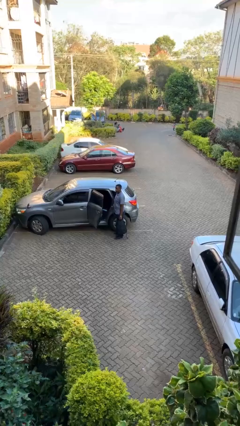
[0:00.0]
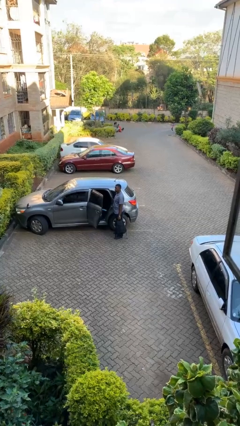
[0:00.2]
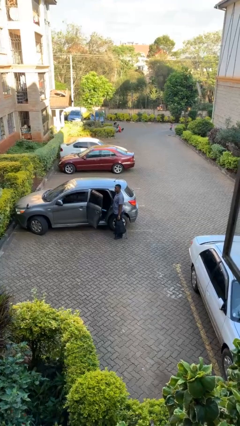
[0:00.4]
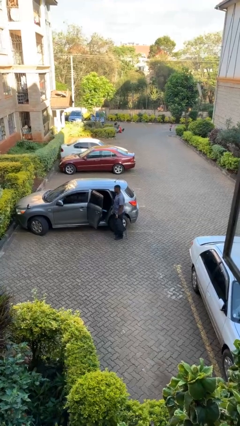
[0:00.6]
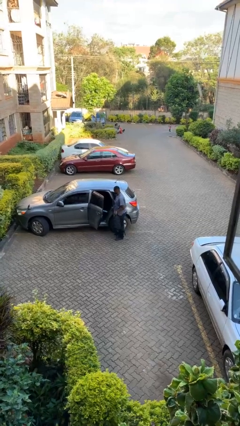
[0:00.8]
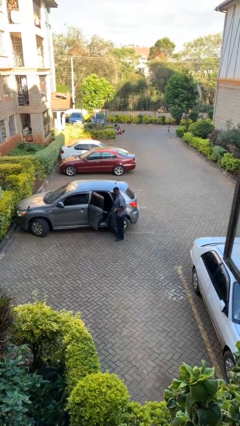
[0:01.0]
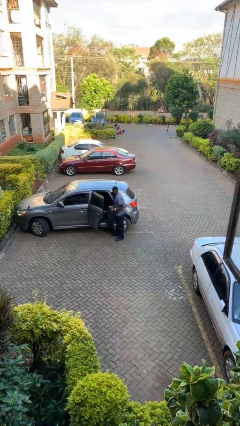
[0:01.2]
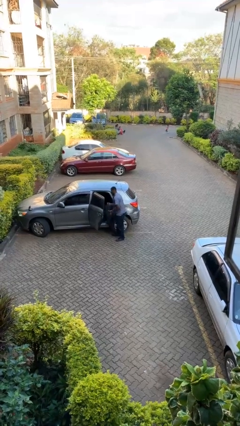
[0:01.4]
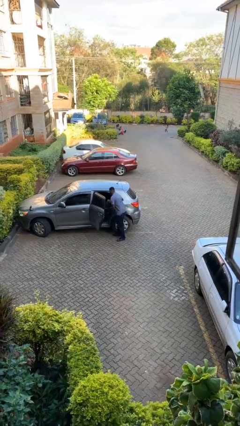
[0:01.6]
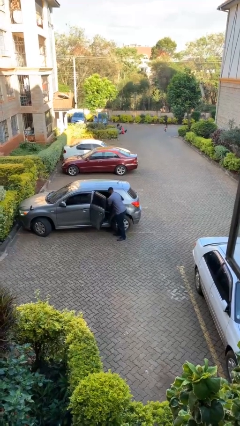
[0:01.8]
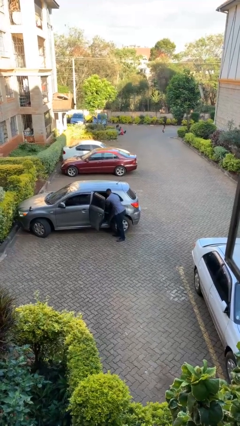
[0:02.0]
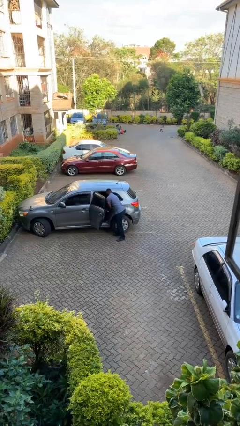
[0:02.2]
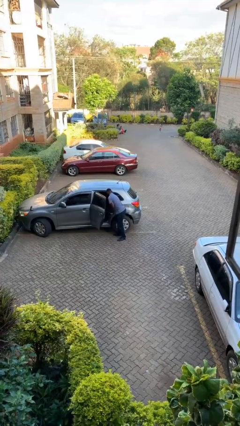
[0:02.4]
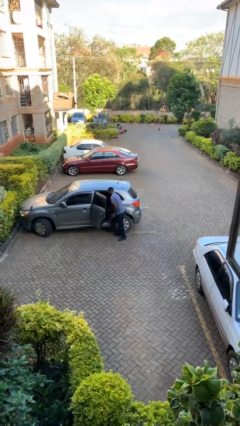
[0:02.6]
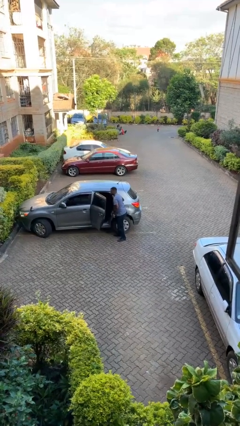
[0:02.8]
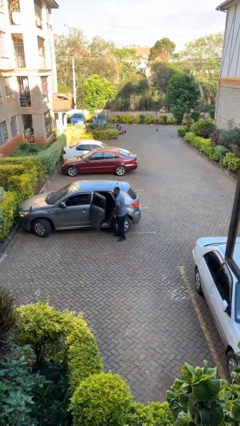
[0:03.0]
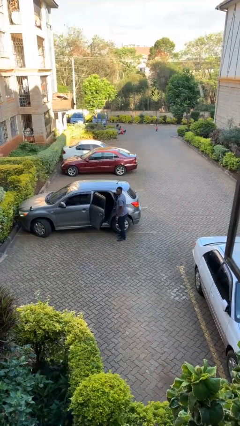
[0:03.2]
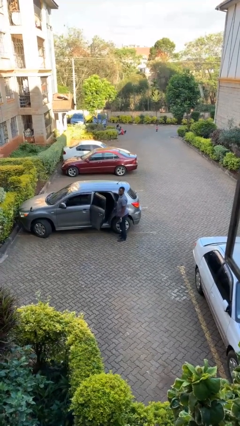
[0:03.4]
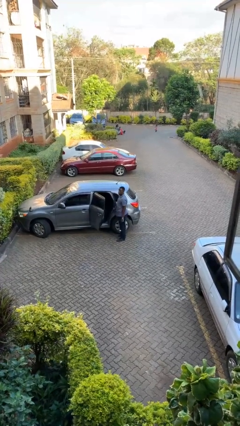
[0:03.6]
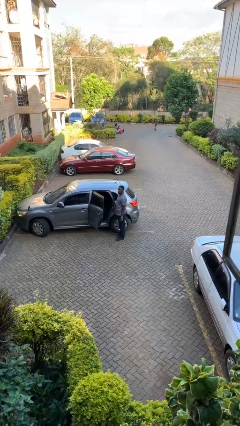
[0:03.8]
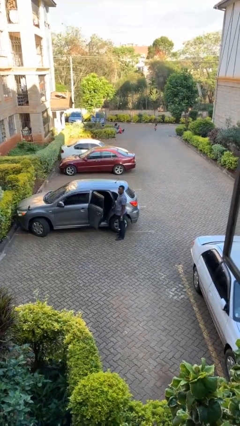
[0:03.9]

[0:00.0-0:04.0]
person loads car

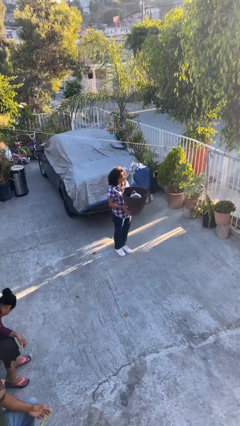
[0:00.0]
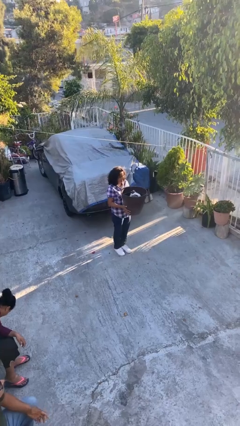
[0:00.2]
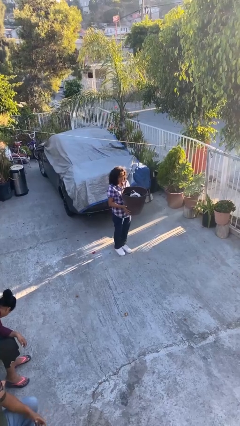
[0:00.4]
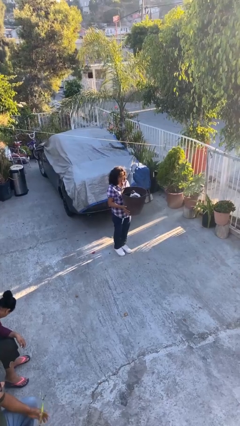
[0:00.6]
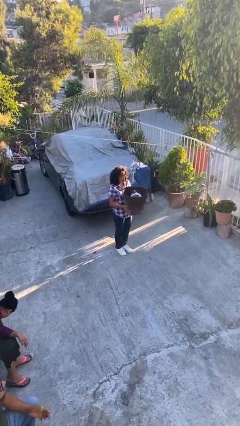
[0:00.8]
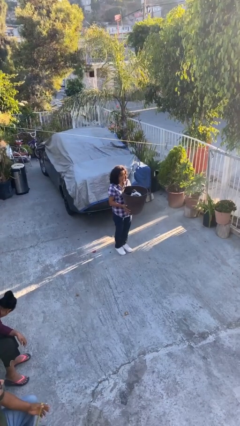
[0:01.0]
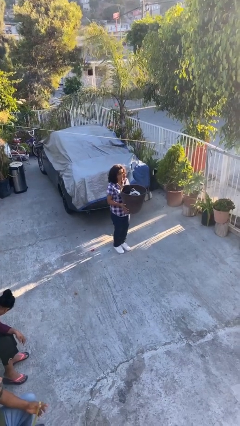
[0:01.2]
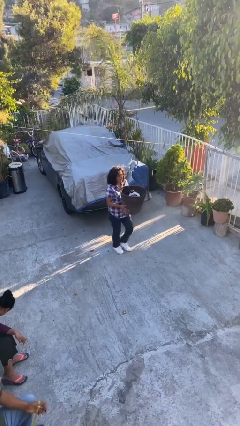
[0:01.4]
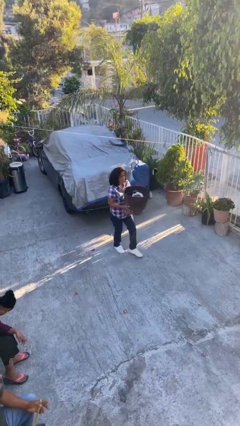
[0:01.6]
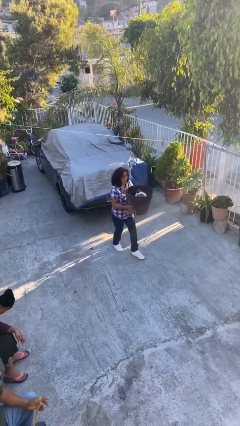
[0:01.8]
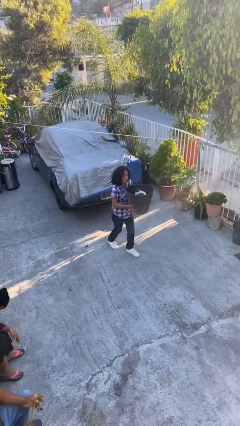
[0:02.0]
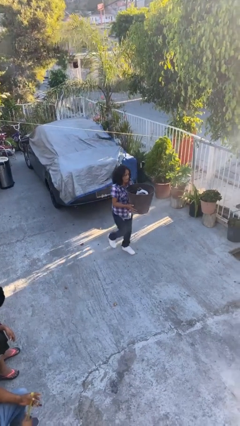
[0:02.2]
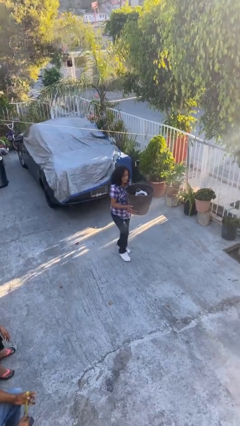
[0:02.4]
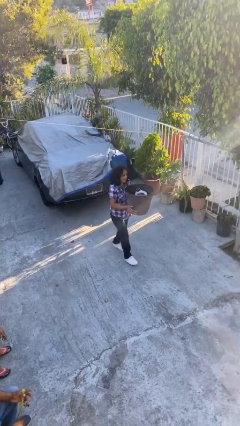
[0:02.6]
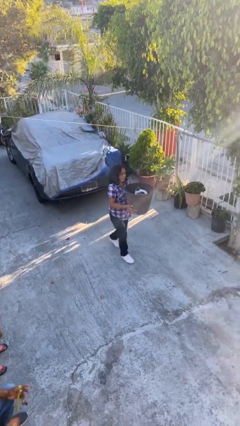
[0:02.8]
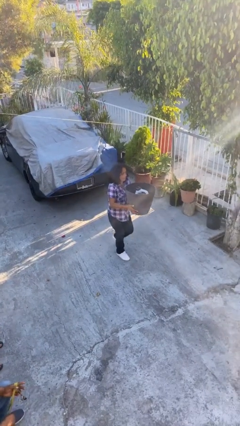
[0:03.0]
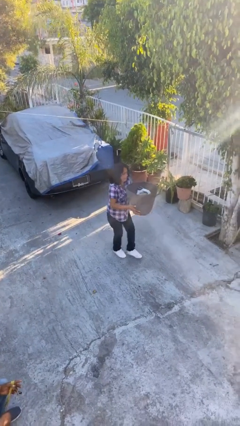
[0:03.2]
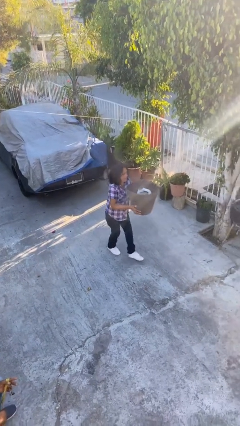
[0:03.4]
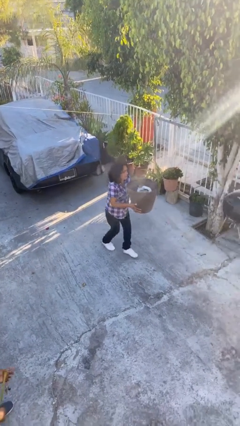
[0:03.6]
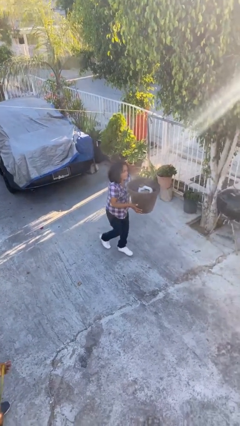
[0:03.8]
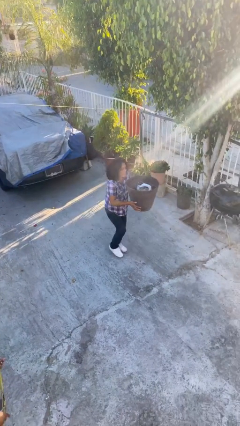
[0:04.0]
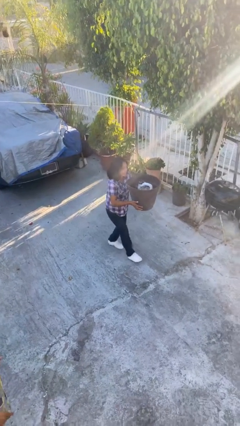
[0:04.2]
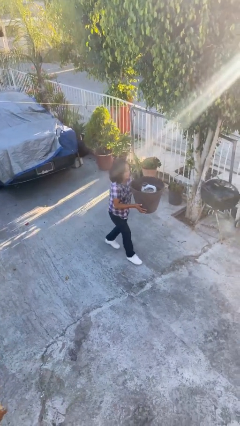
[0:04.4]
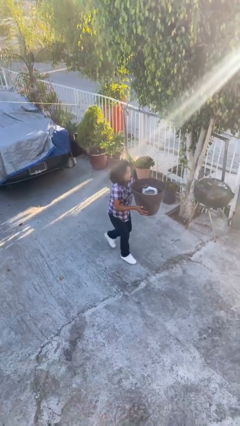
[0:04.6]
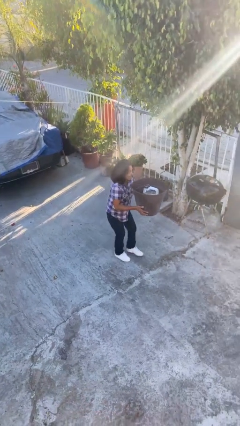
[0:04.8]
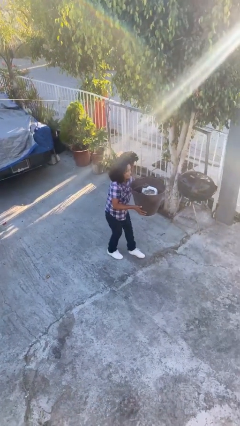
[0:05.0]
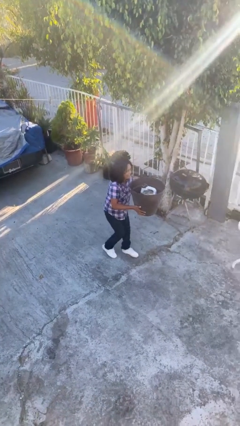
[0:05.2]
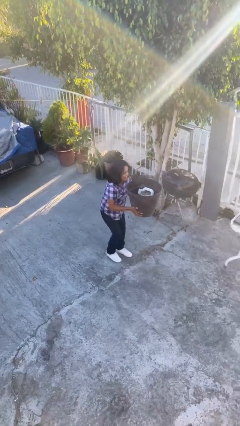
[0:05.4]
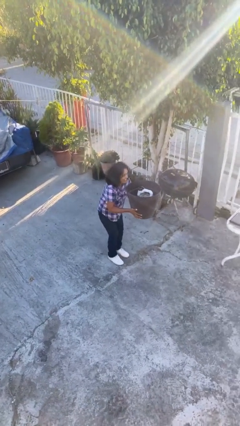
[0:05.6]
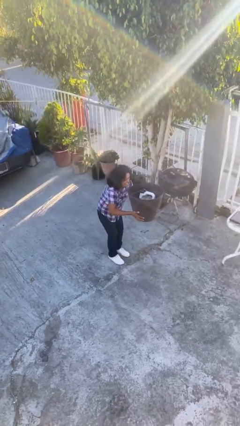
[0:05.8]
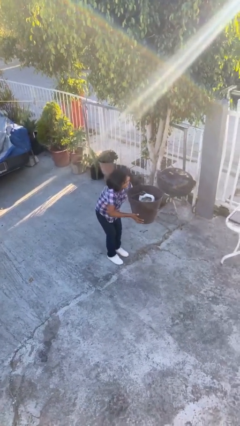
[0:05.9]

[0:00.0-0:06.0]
person carries heavy object

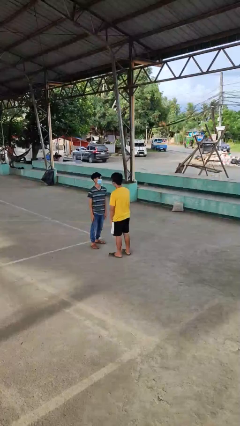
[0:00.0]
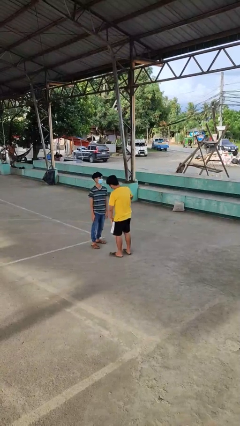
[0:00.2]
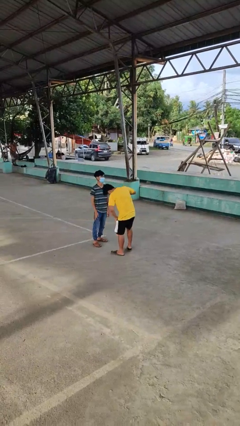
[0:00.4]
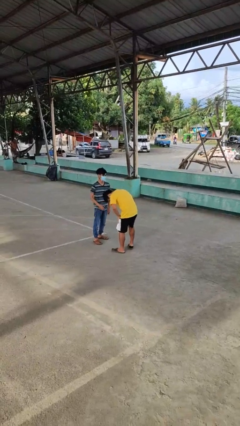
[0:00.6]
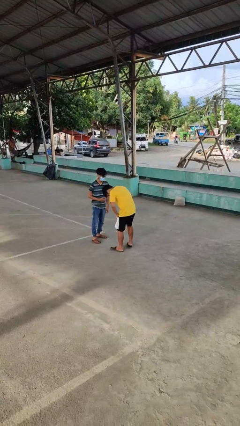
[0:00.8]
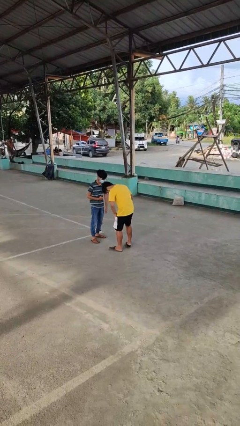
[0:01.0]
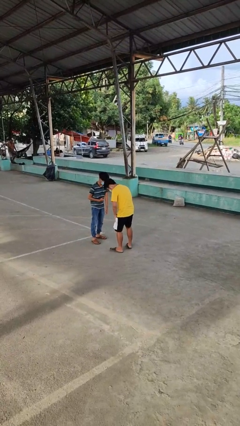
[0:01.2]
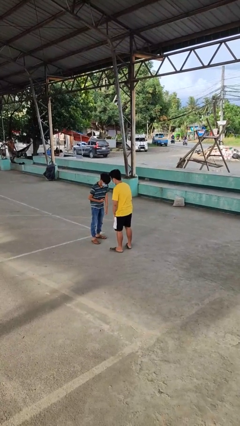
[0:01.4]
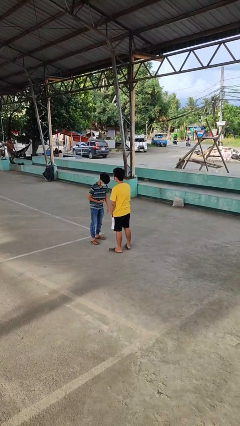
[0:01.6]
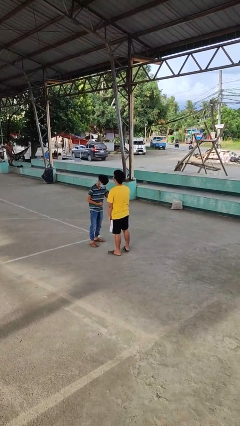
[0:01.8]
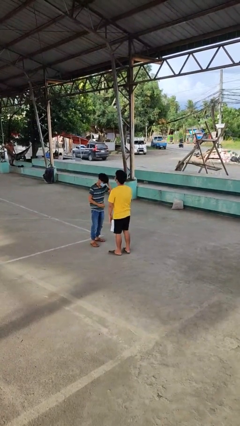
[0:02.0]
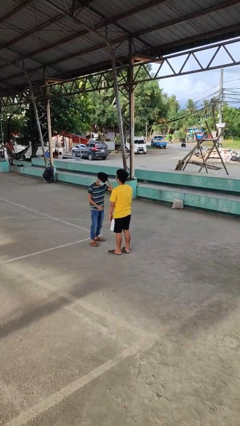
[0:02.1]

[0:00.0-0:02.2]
person laughs with person

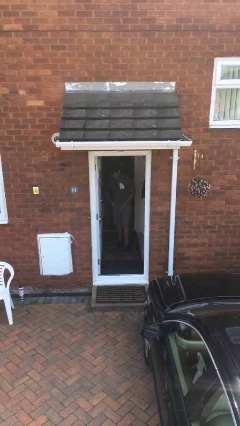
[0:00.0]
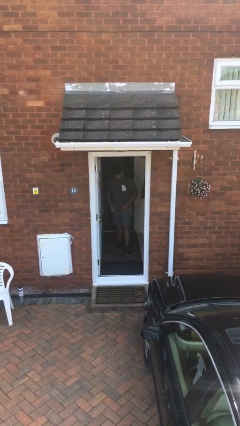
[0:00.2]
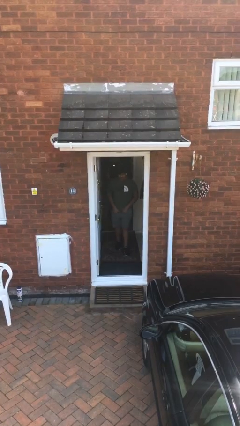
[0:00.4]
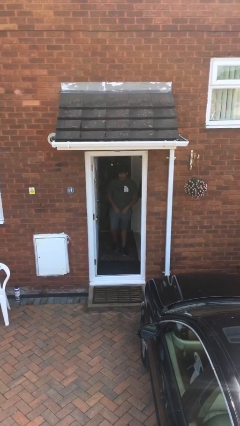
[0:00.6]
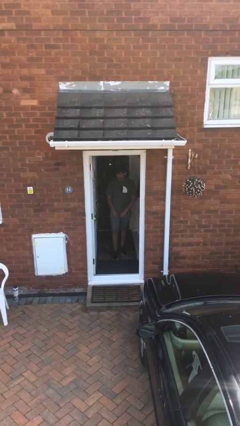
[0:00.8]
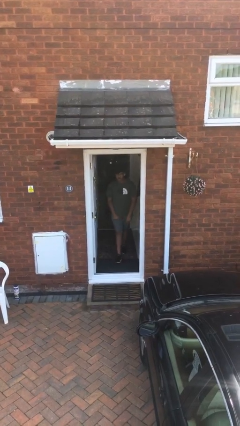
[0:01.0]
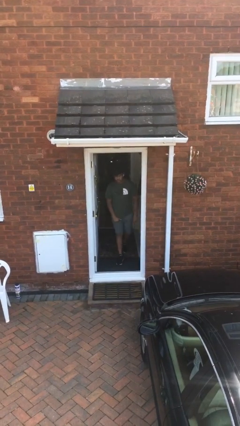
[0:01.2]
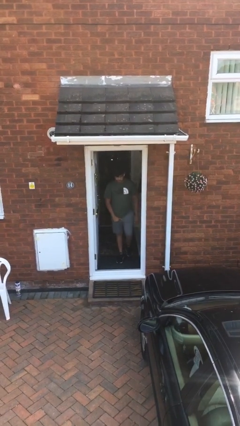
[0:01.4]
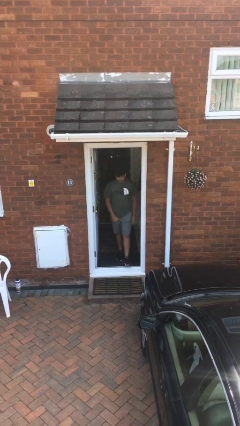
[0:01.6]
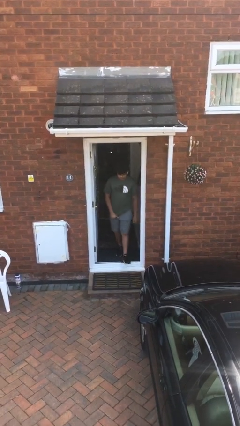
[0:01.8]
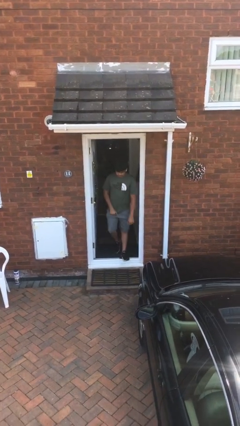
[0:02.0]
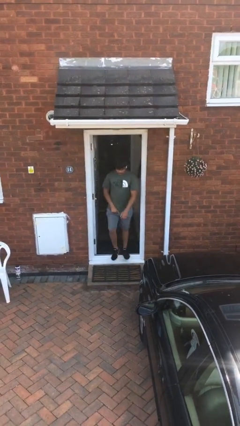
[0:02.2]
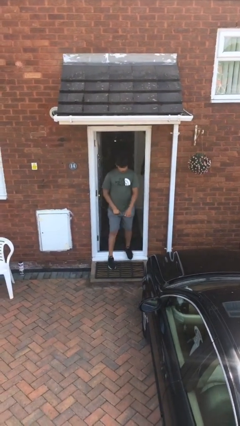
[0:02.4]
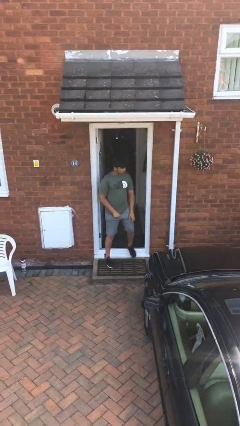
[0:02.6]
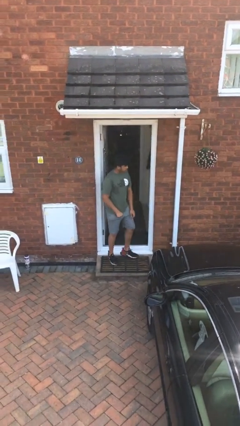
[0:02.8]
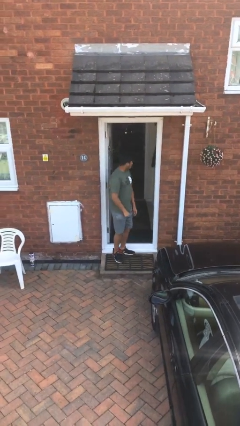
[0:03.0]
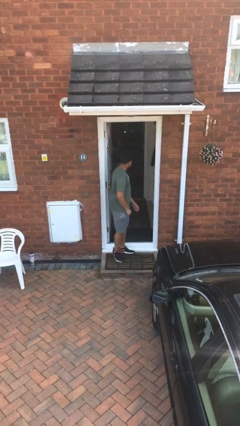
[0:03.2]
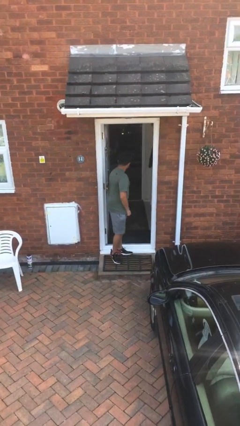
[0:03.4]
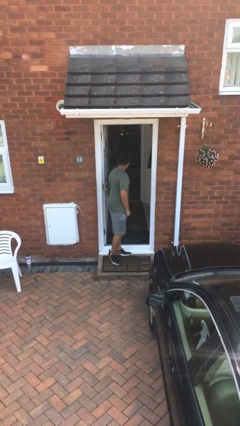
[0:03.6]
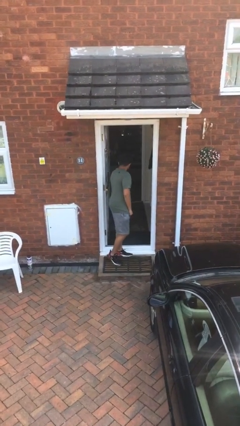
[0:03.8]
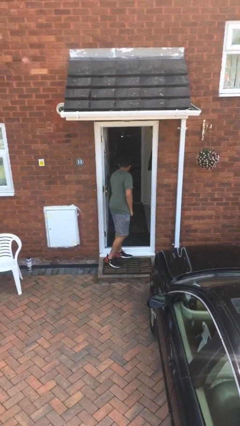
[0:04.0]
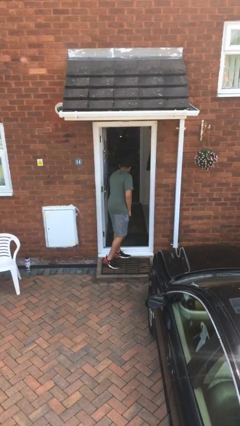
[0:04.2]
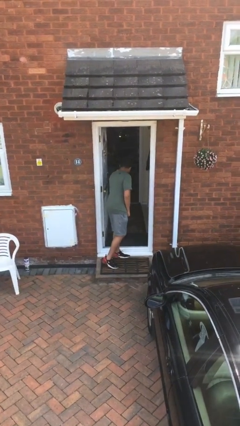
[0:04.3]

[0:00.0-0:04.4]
person enters scene through structure

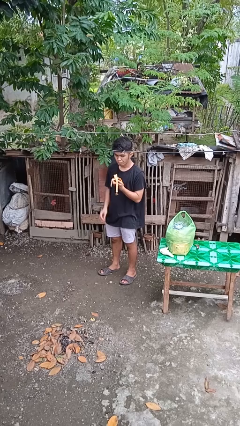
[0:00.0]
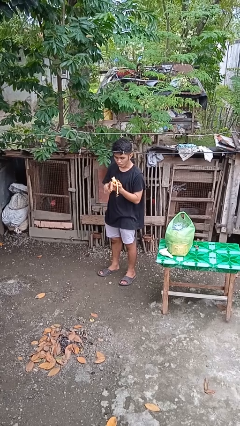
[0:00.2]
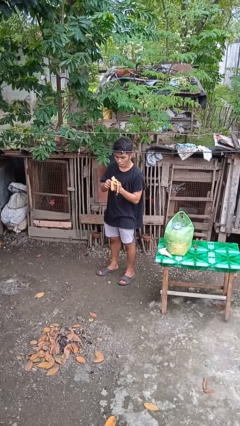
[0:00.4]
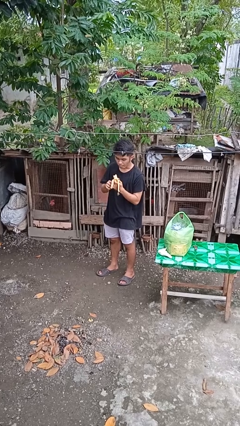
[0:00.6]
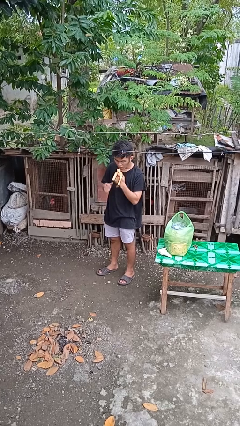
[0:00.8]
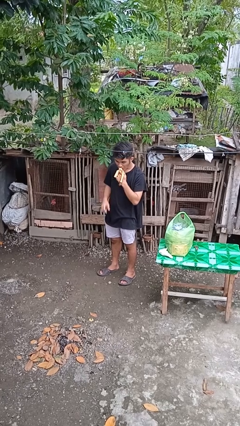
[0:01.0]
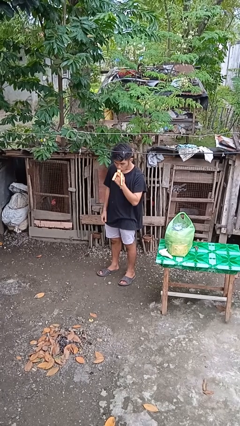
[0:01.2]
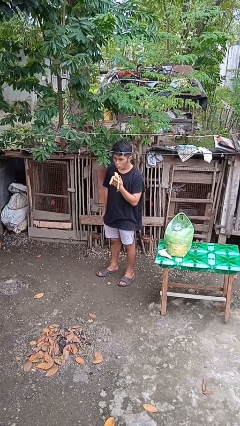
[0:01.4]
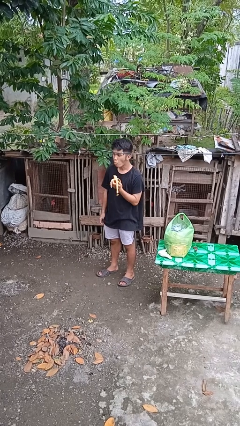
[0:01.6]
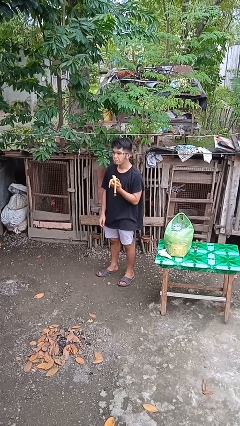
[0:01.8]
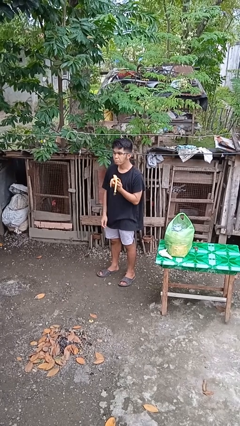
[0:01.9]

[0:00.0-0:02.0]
person eats banana
